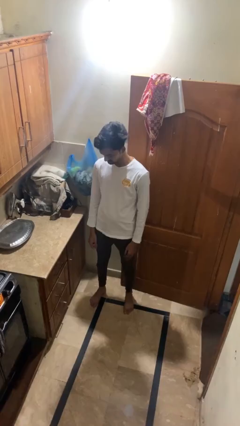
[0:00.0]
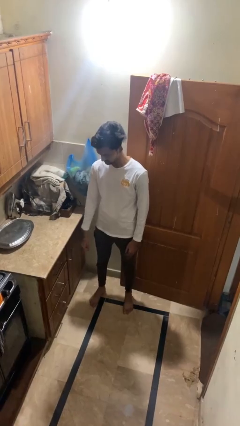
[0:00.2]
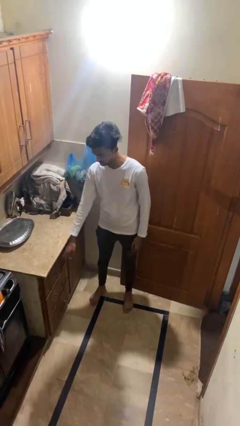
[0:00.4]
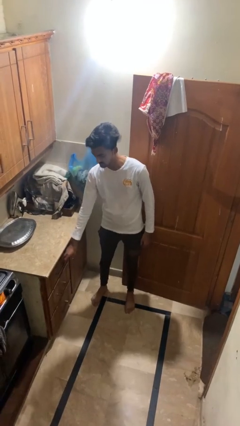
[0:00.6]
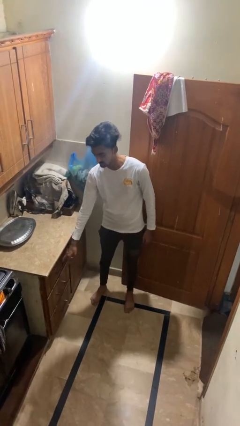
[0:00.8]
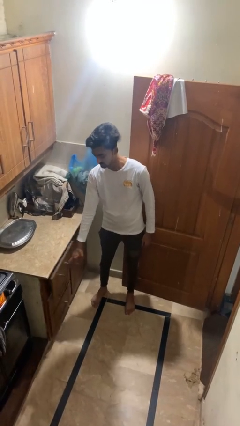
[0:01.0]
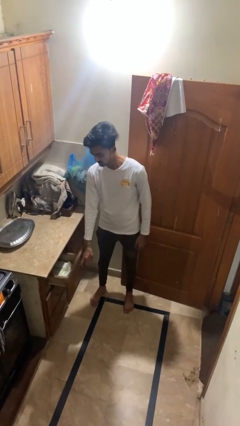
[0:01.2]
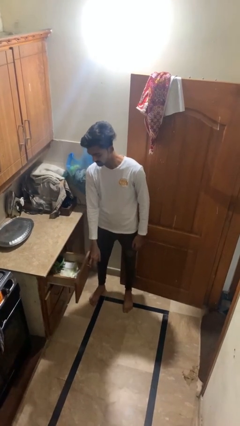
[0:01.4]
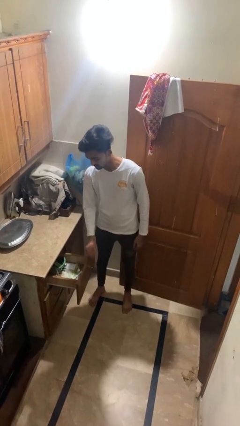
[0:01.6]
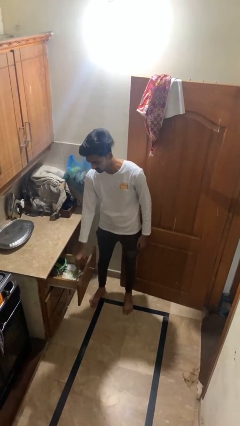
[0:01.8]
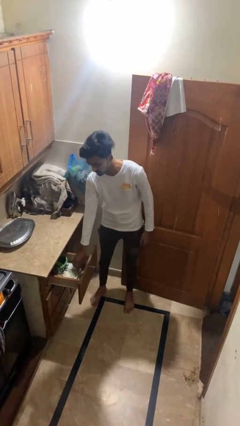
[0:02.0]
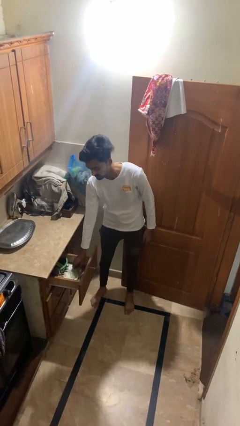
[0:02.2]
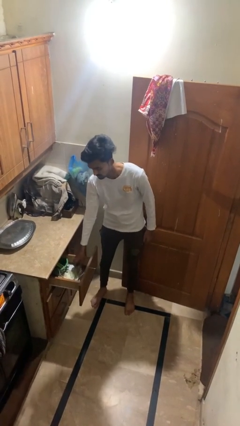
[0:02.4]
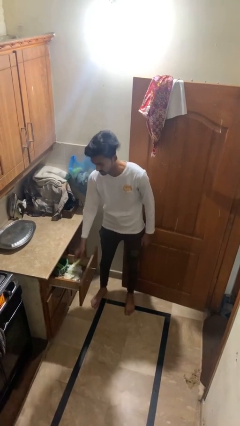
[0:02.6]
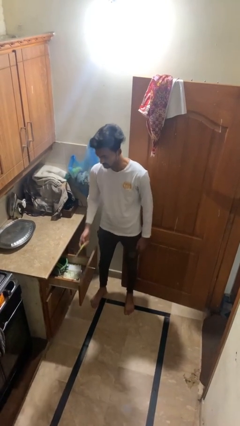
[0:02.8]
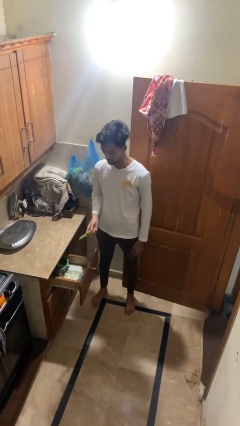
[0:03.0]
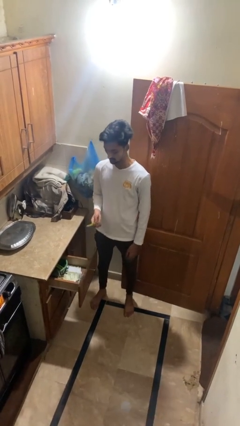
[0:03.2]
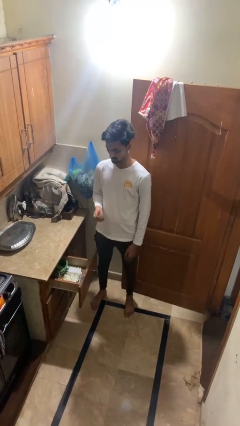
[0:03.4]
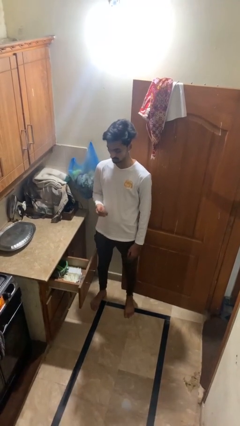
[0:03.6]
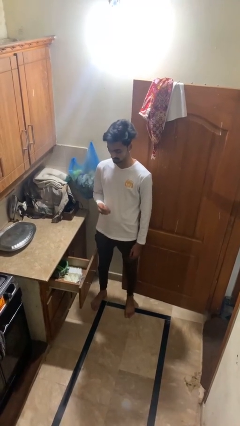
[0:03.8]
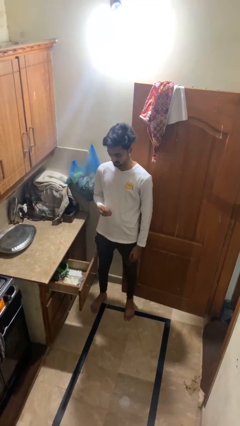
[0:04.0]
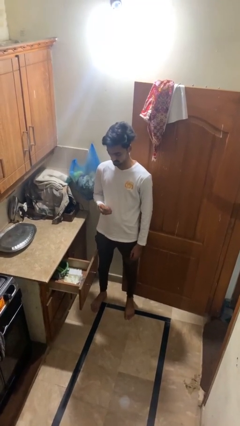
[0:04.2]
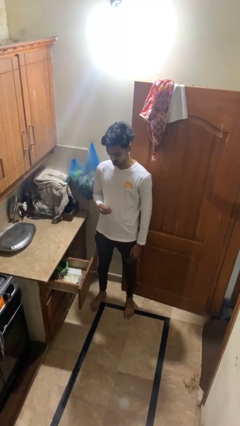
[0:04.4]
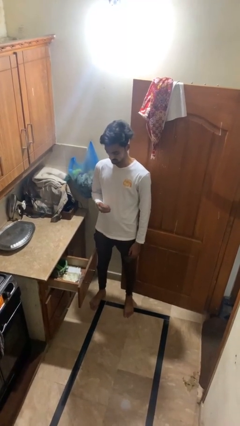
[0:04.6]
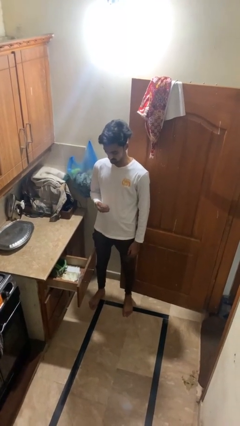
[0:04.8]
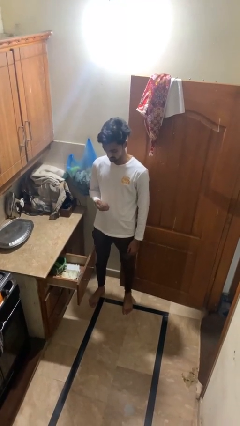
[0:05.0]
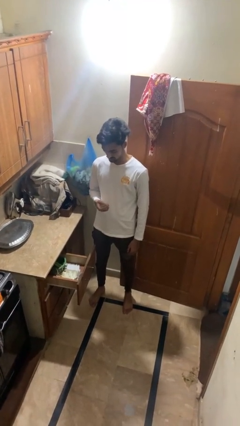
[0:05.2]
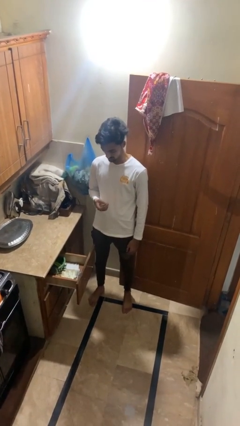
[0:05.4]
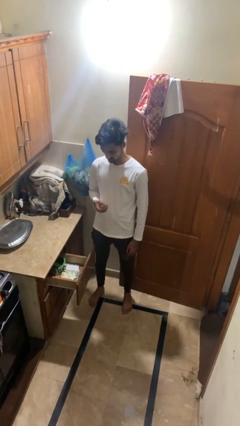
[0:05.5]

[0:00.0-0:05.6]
person takes object from kitchen drawer

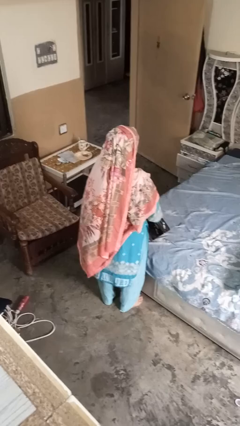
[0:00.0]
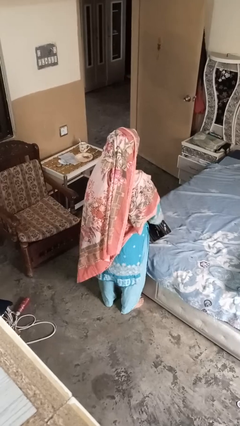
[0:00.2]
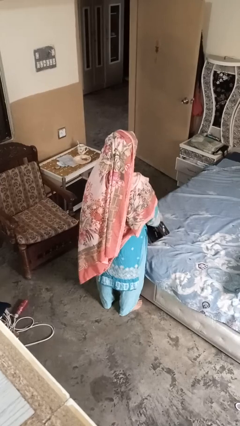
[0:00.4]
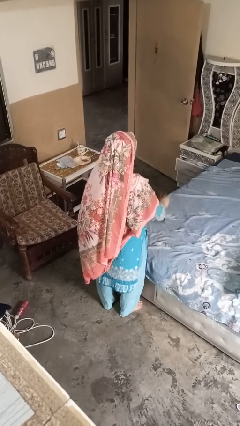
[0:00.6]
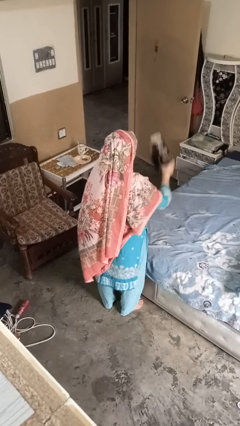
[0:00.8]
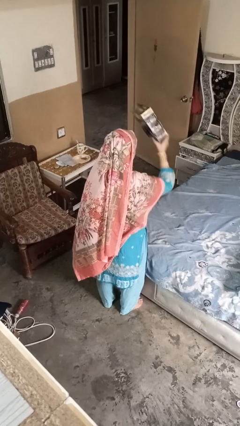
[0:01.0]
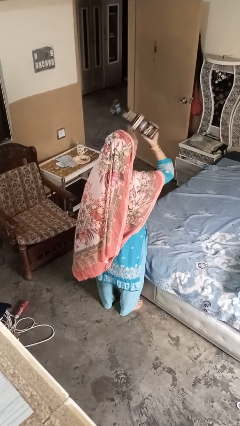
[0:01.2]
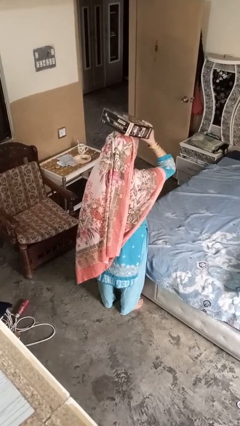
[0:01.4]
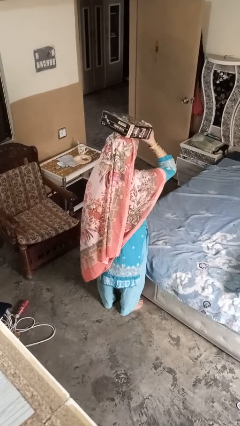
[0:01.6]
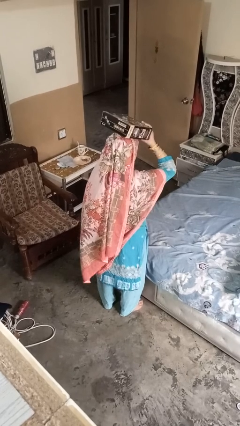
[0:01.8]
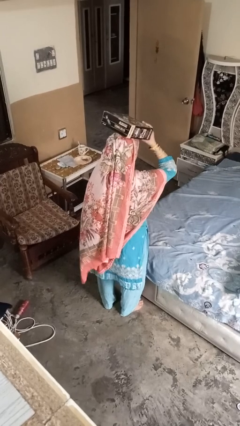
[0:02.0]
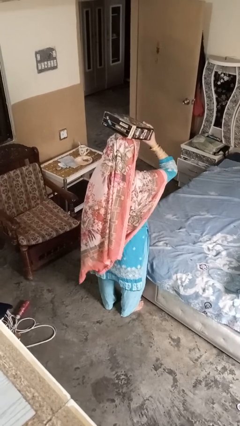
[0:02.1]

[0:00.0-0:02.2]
person holds object above head

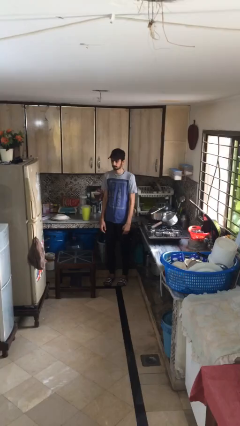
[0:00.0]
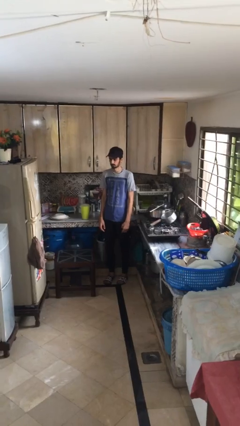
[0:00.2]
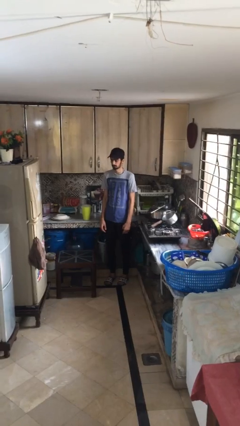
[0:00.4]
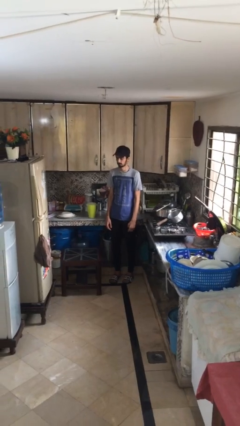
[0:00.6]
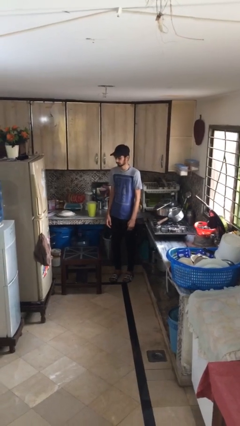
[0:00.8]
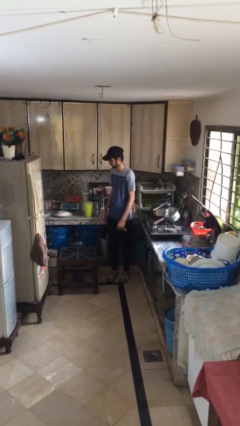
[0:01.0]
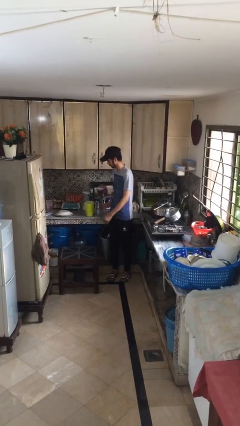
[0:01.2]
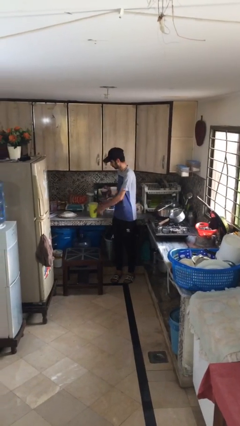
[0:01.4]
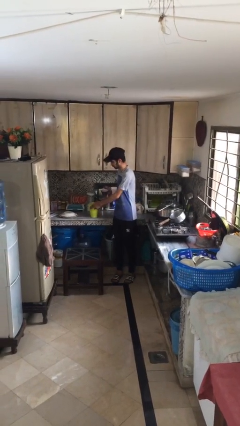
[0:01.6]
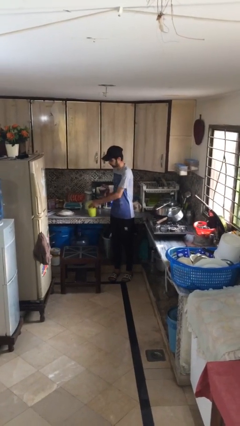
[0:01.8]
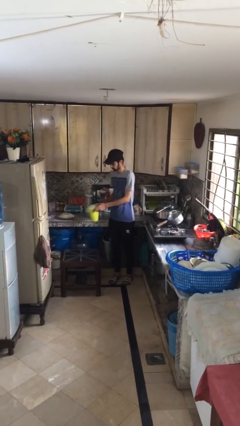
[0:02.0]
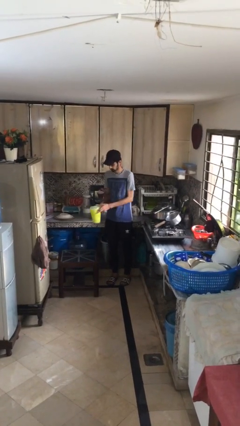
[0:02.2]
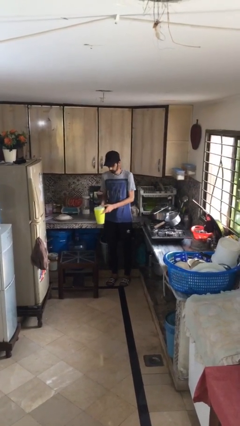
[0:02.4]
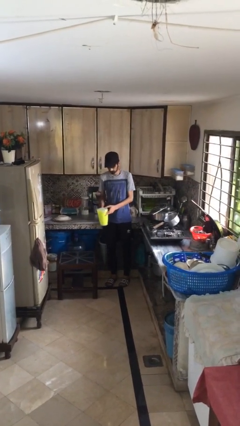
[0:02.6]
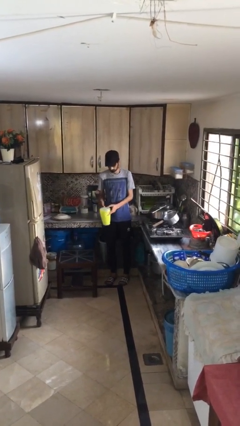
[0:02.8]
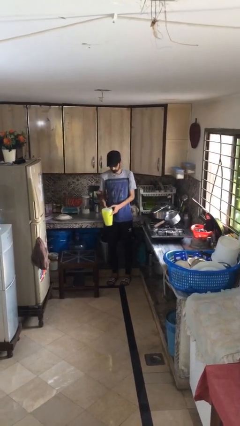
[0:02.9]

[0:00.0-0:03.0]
person picks up object from shelf

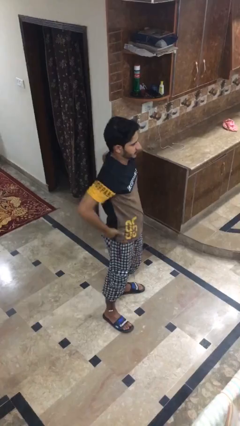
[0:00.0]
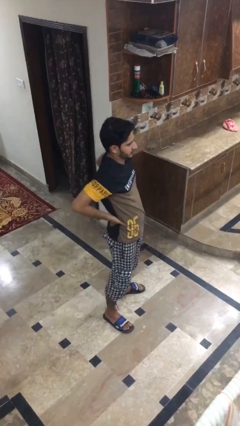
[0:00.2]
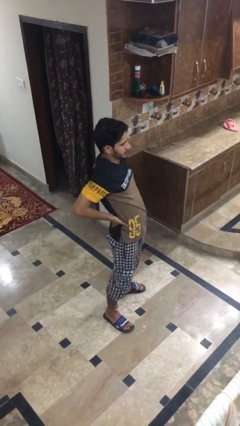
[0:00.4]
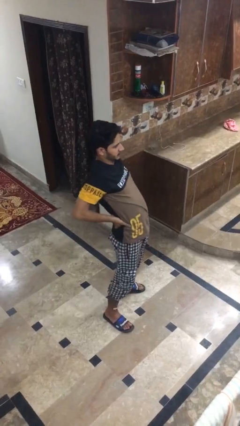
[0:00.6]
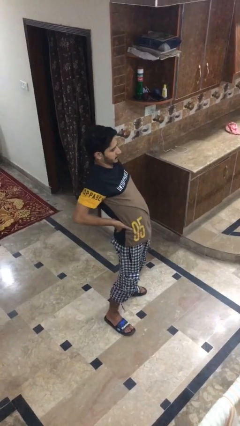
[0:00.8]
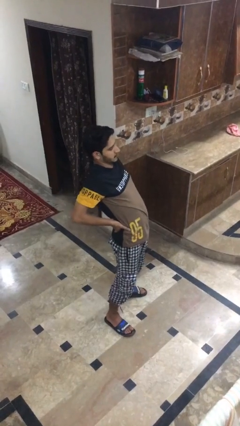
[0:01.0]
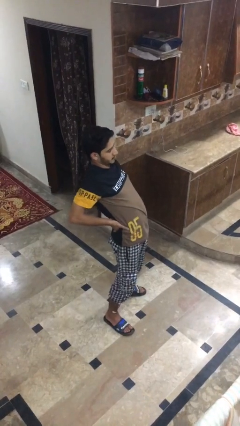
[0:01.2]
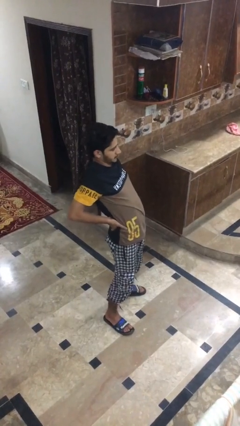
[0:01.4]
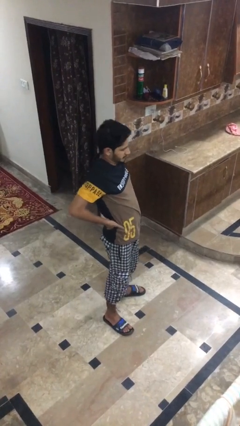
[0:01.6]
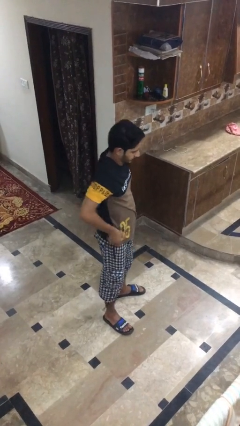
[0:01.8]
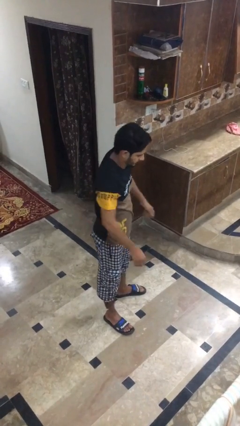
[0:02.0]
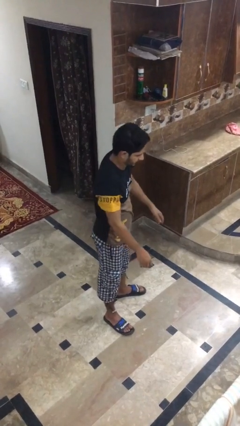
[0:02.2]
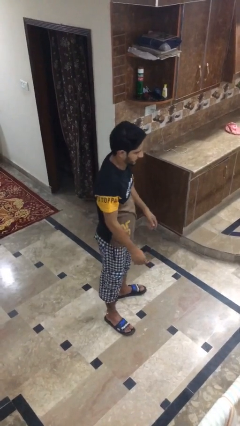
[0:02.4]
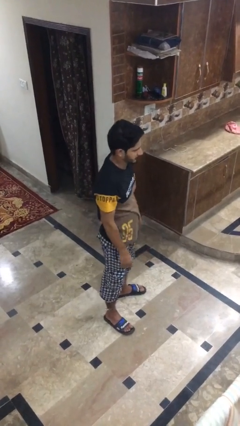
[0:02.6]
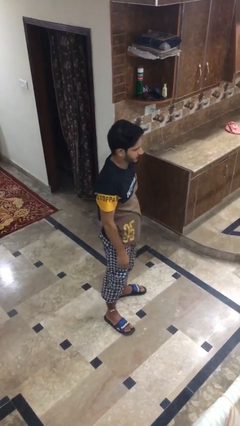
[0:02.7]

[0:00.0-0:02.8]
person stretches back

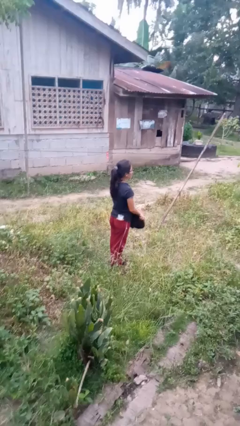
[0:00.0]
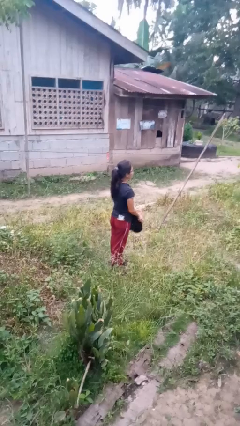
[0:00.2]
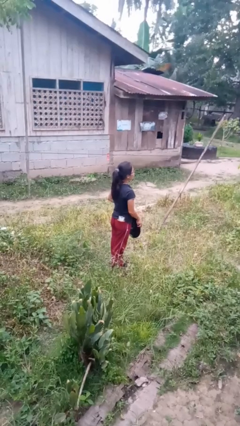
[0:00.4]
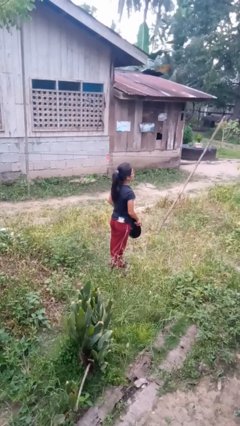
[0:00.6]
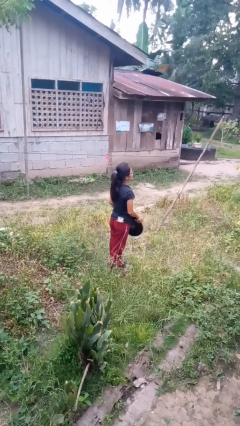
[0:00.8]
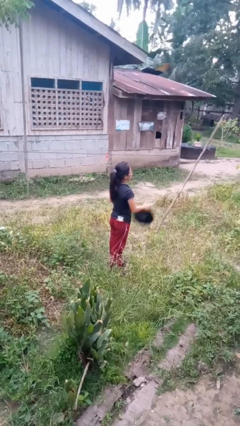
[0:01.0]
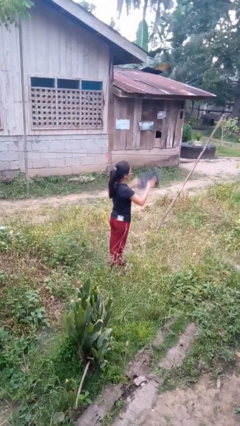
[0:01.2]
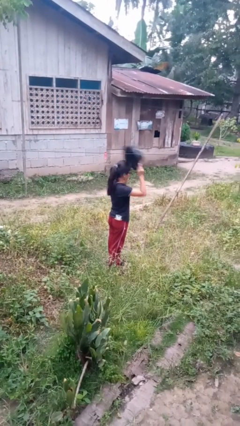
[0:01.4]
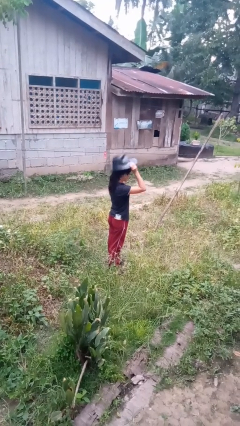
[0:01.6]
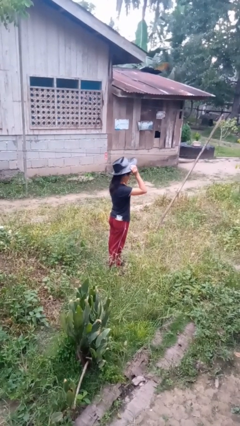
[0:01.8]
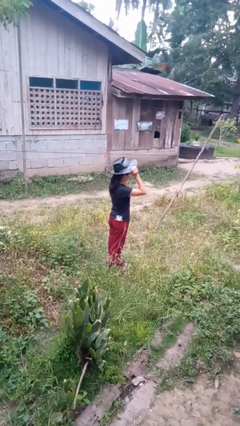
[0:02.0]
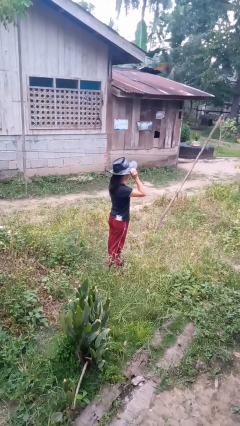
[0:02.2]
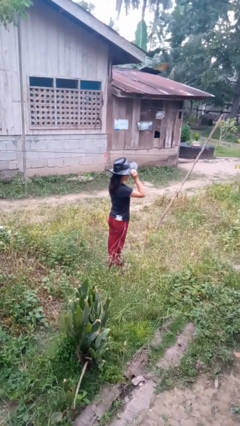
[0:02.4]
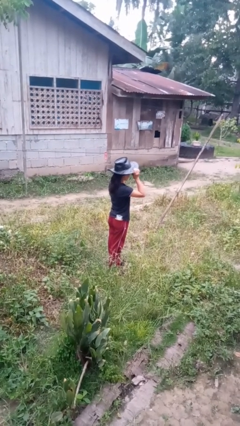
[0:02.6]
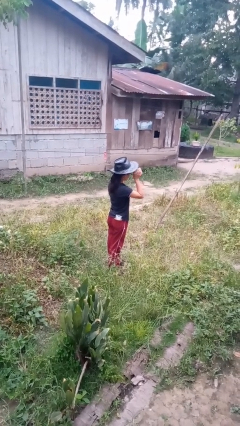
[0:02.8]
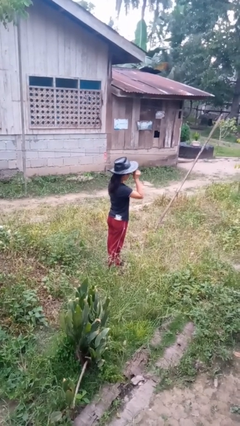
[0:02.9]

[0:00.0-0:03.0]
person puts on hat

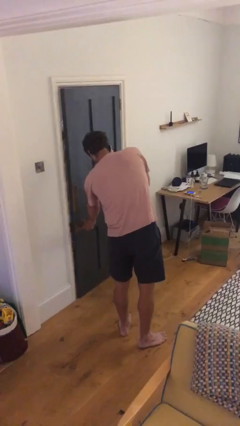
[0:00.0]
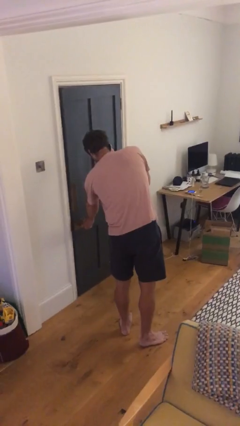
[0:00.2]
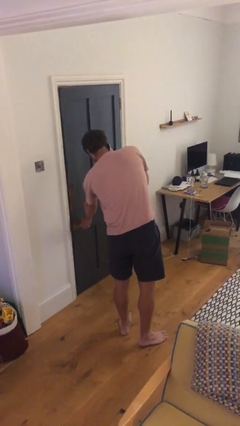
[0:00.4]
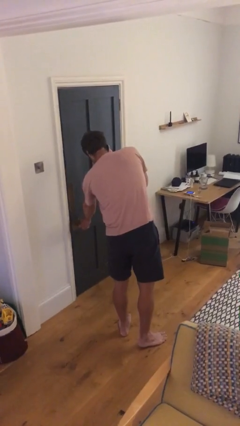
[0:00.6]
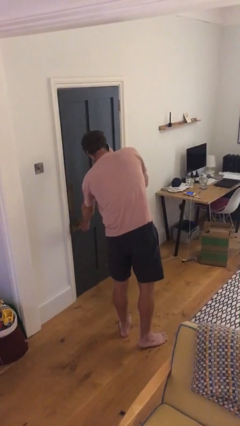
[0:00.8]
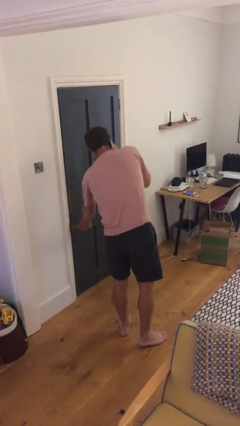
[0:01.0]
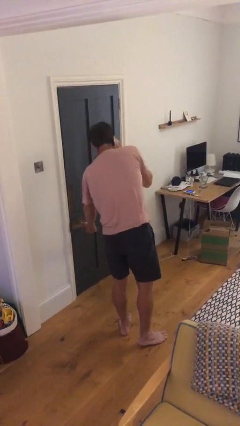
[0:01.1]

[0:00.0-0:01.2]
person closes facility door
